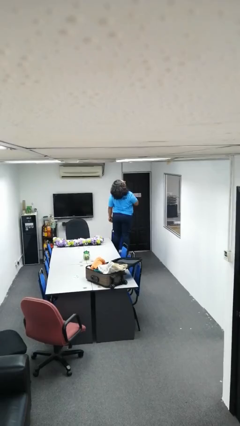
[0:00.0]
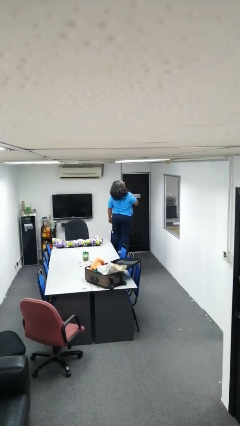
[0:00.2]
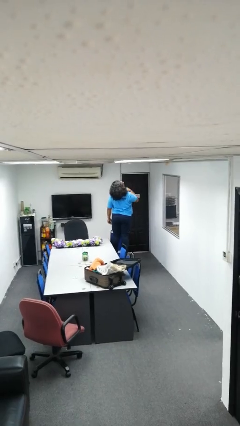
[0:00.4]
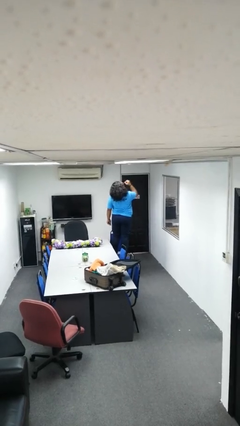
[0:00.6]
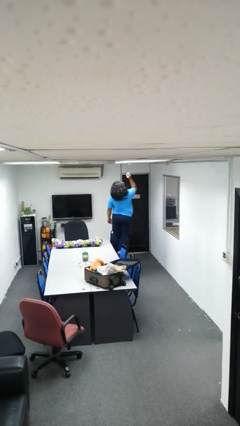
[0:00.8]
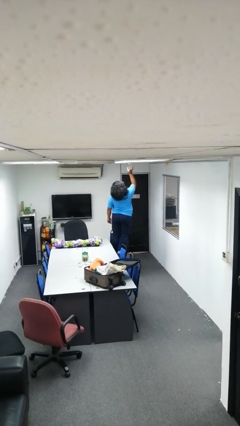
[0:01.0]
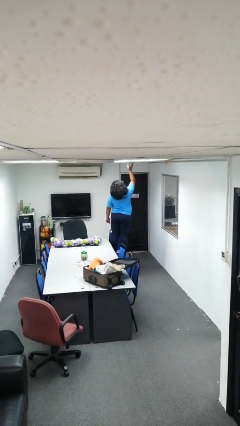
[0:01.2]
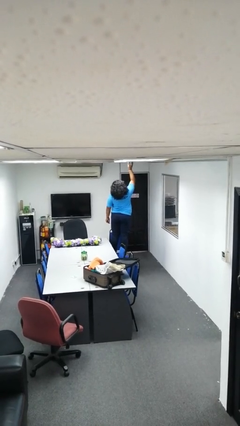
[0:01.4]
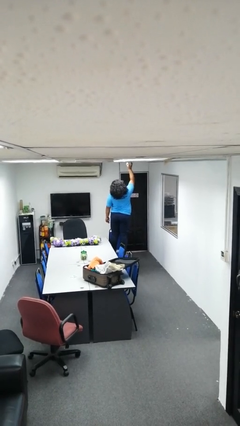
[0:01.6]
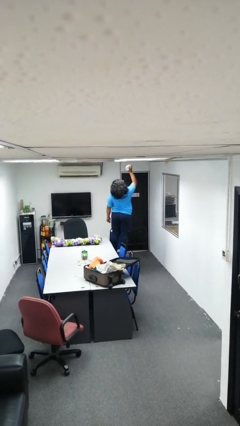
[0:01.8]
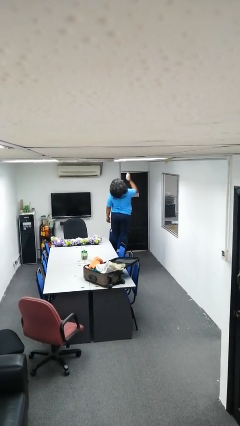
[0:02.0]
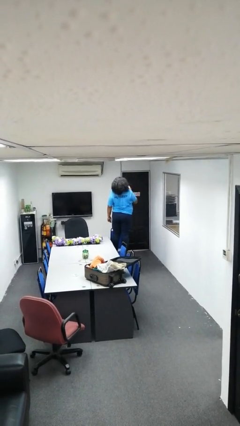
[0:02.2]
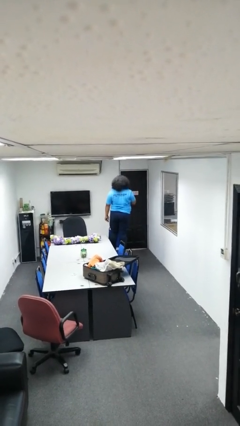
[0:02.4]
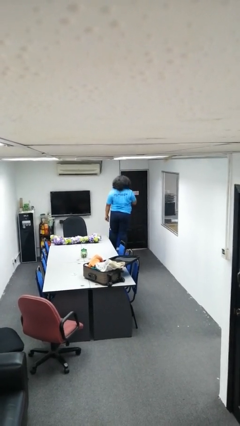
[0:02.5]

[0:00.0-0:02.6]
person takes down smoke detector

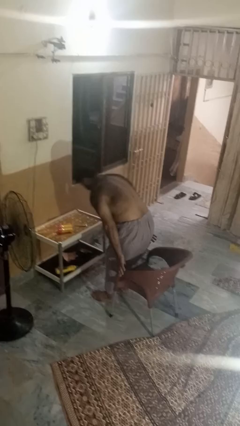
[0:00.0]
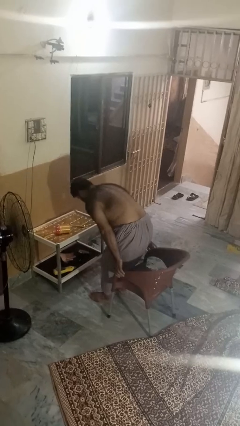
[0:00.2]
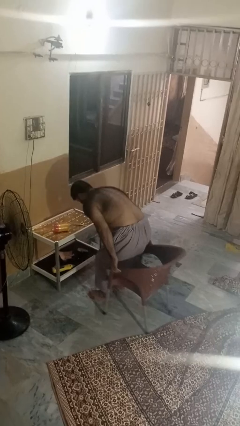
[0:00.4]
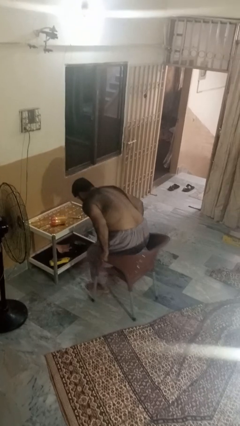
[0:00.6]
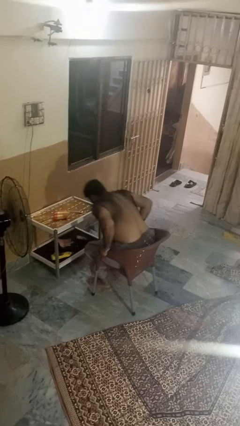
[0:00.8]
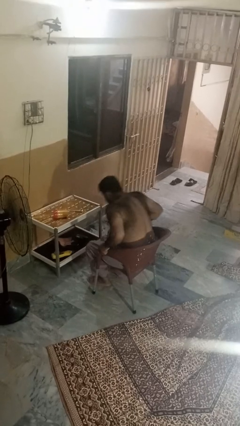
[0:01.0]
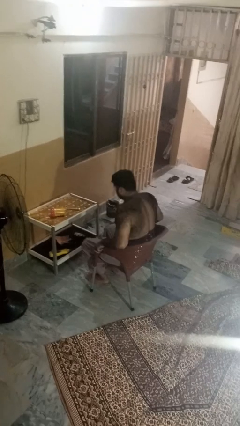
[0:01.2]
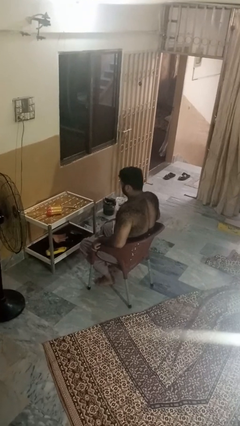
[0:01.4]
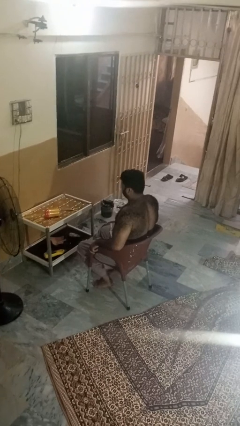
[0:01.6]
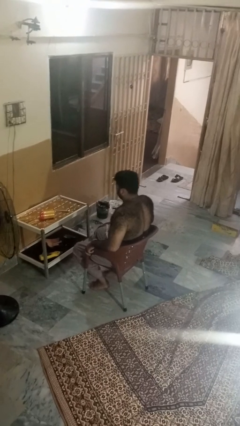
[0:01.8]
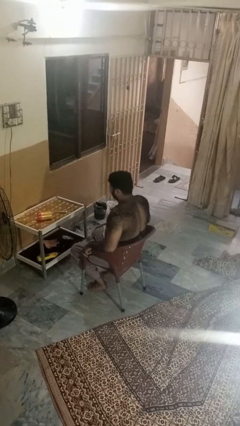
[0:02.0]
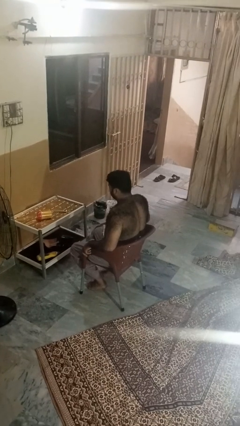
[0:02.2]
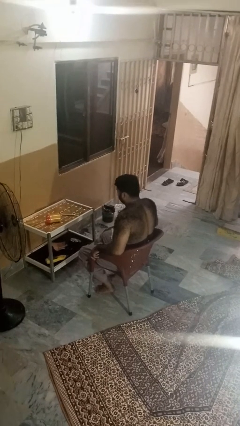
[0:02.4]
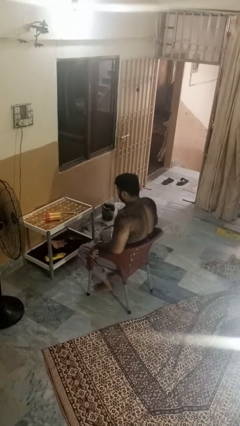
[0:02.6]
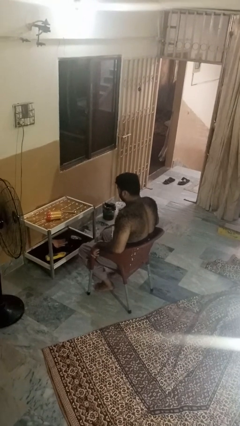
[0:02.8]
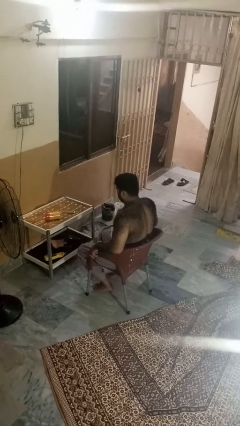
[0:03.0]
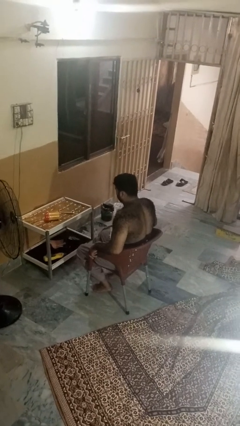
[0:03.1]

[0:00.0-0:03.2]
person sits down

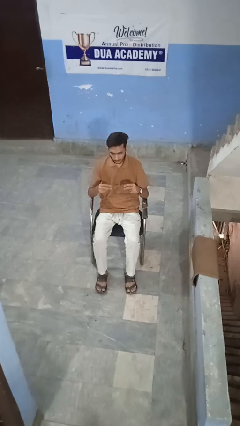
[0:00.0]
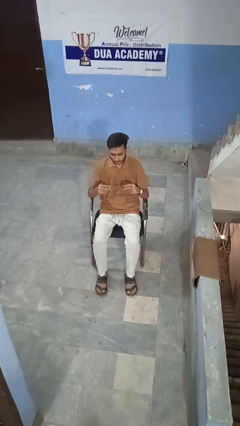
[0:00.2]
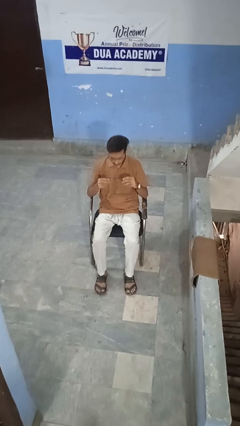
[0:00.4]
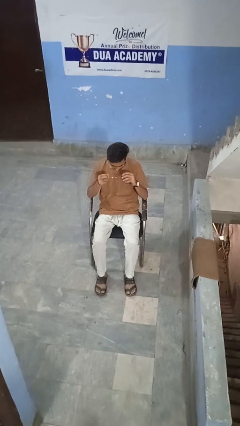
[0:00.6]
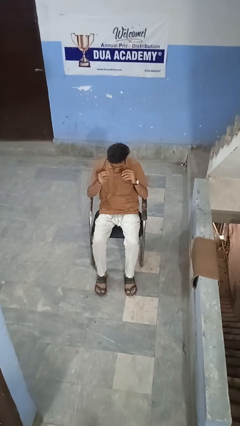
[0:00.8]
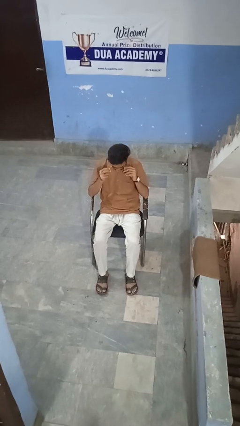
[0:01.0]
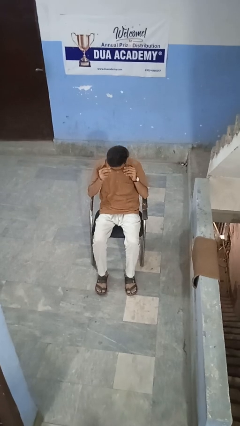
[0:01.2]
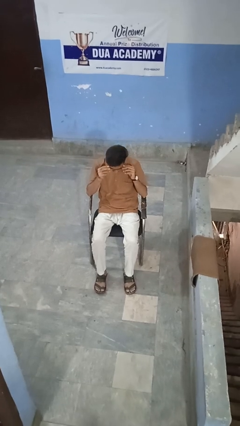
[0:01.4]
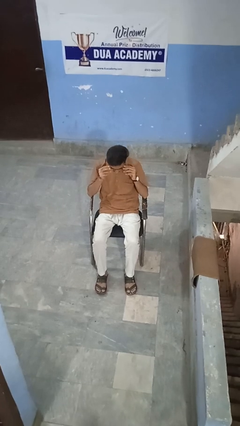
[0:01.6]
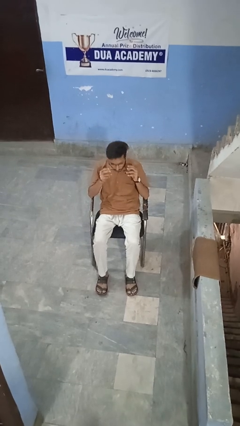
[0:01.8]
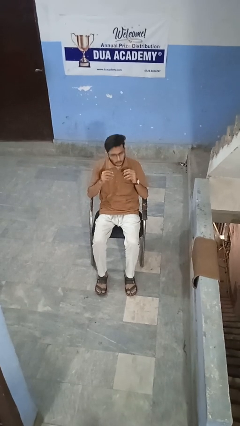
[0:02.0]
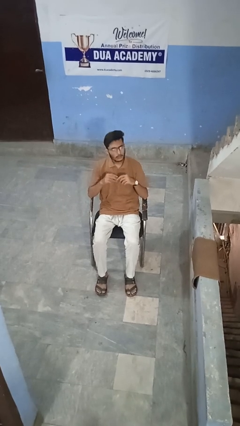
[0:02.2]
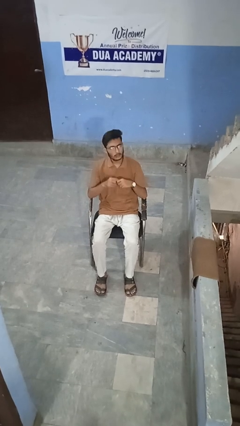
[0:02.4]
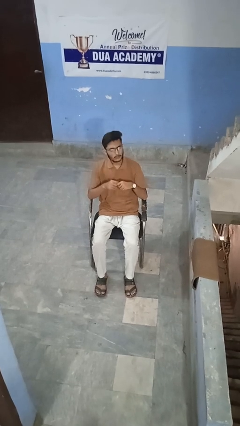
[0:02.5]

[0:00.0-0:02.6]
person puts on glasses

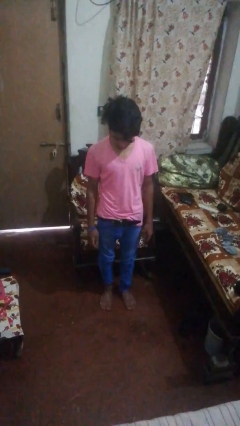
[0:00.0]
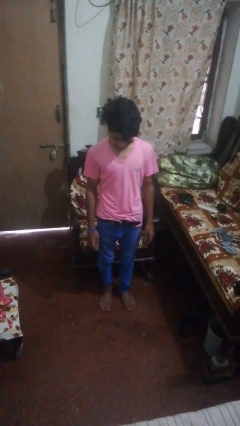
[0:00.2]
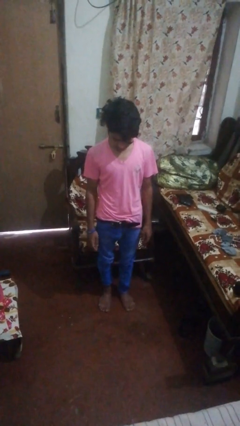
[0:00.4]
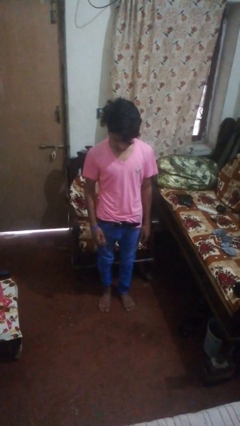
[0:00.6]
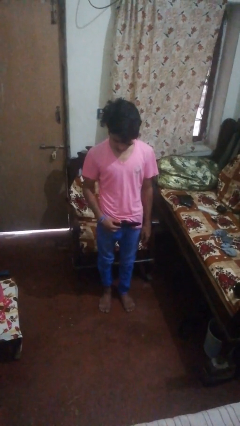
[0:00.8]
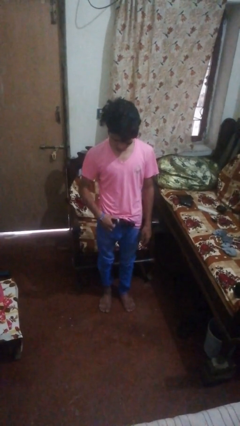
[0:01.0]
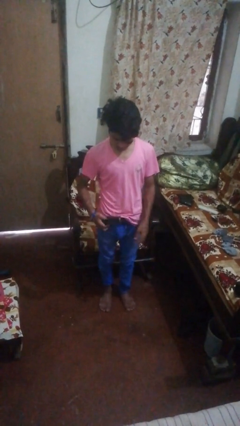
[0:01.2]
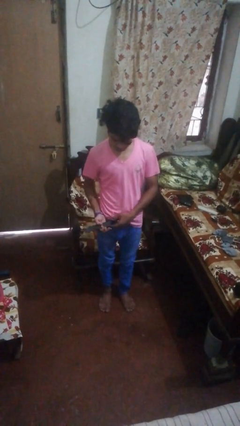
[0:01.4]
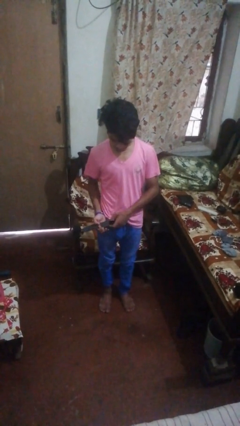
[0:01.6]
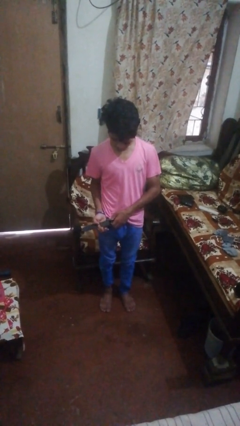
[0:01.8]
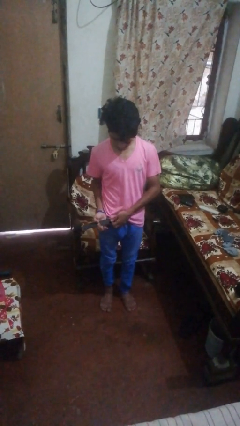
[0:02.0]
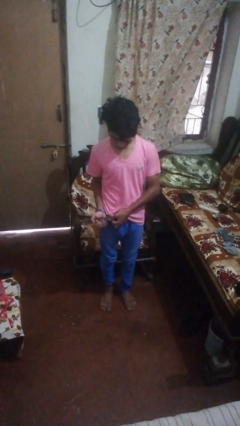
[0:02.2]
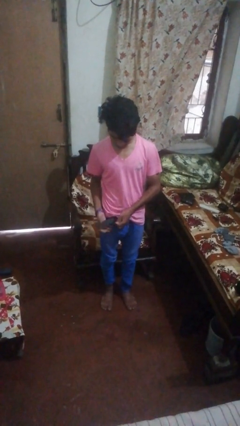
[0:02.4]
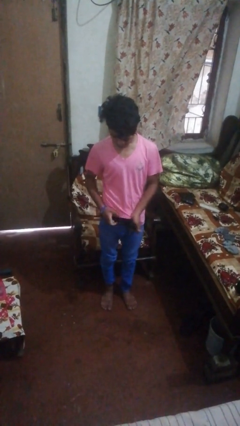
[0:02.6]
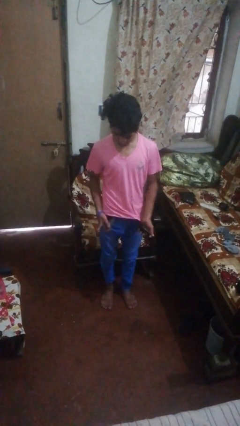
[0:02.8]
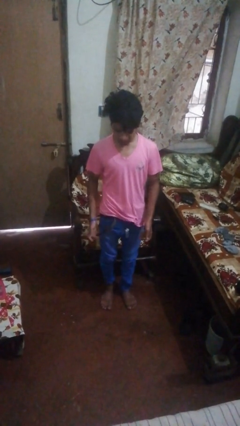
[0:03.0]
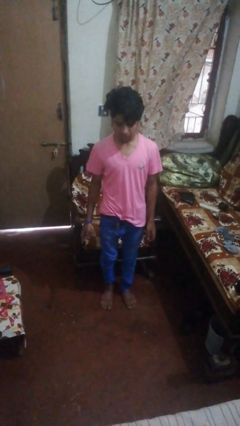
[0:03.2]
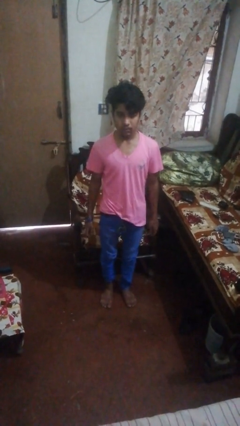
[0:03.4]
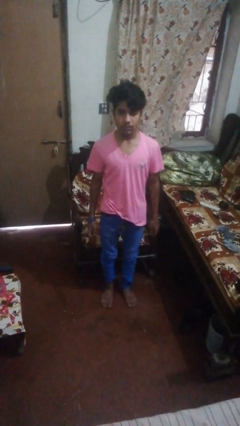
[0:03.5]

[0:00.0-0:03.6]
person takes off belt

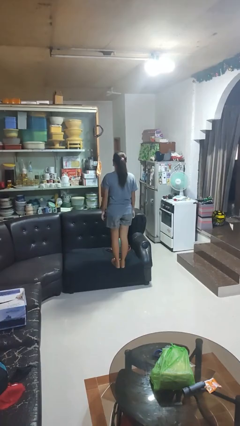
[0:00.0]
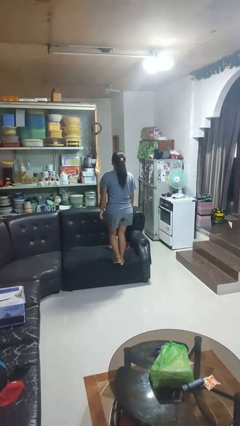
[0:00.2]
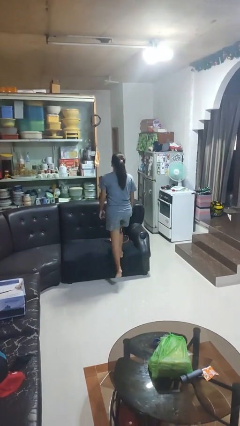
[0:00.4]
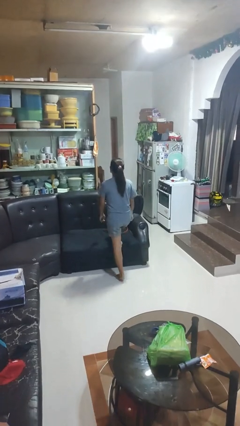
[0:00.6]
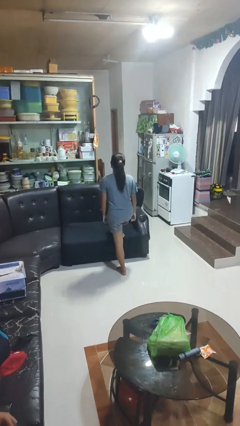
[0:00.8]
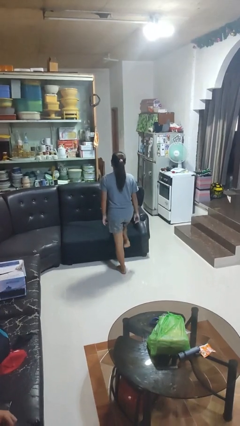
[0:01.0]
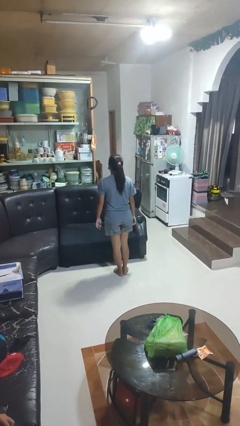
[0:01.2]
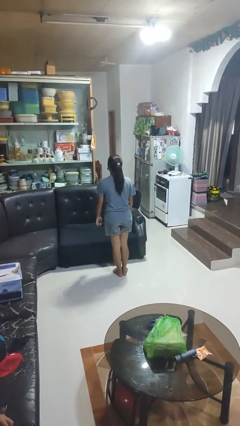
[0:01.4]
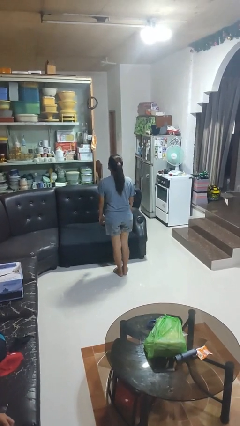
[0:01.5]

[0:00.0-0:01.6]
person climbs off couch

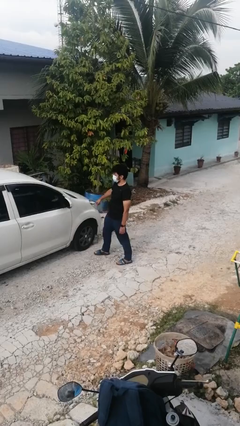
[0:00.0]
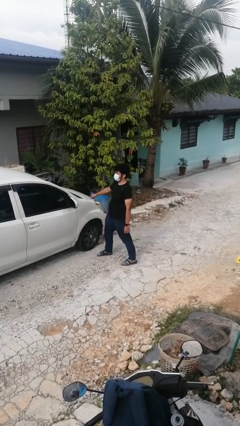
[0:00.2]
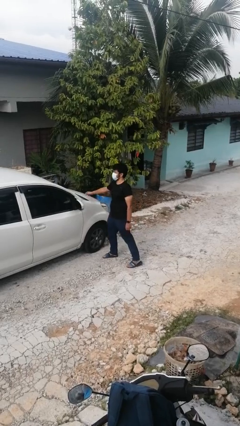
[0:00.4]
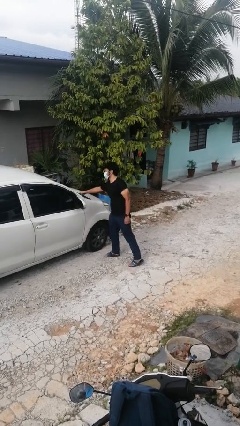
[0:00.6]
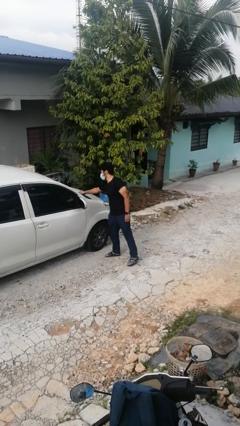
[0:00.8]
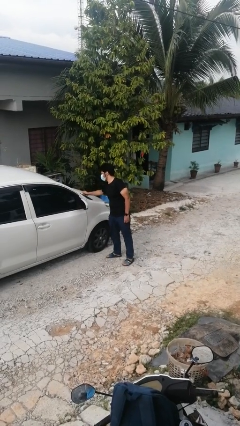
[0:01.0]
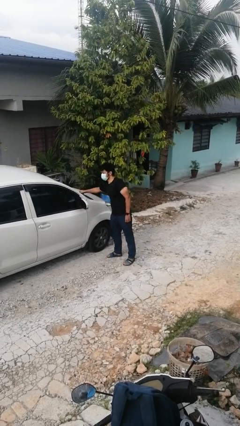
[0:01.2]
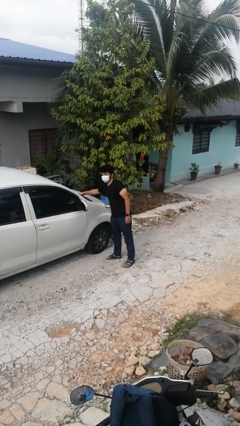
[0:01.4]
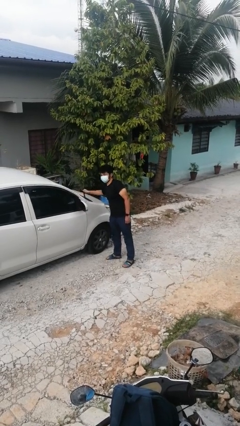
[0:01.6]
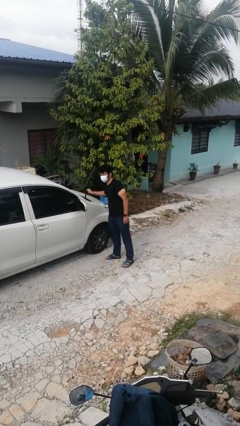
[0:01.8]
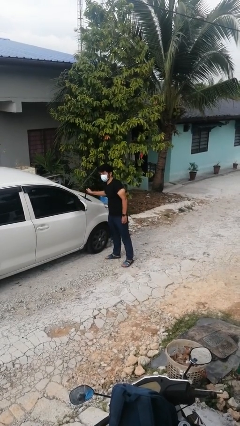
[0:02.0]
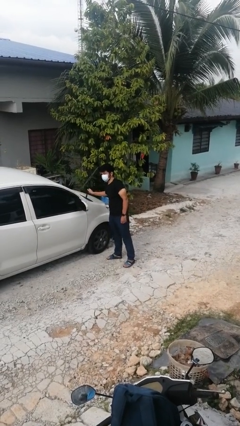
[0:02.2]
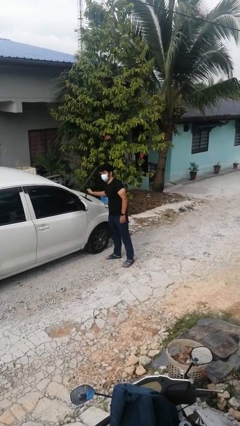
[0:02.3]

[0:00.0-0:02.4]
person flips up car wipers

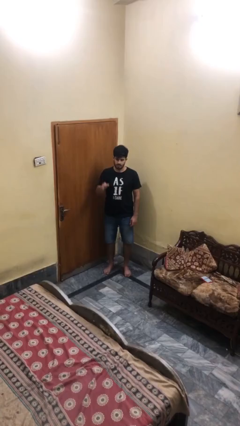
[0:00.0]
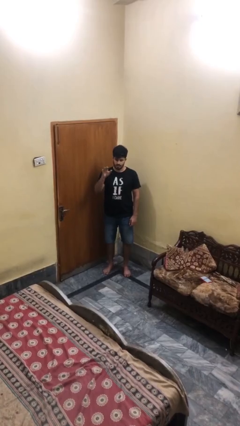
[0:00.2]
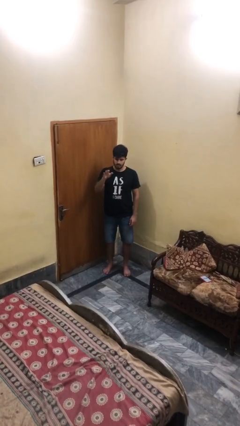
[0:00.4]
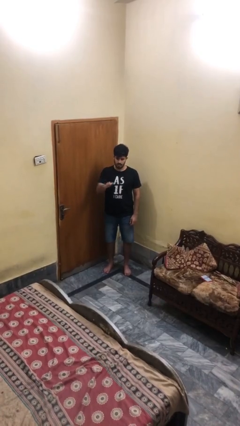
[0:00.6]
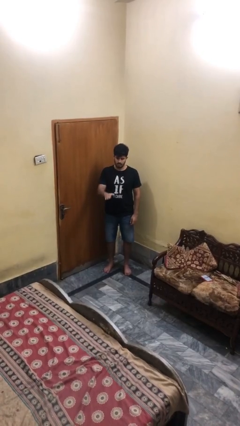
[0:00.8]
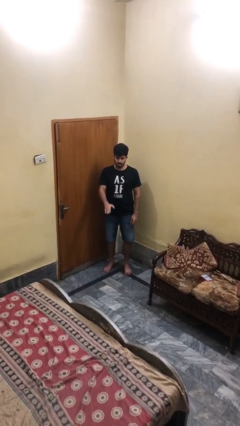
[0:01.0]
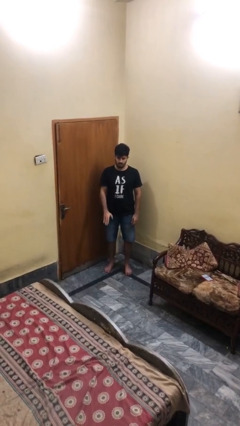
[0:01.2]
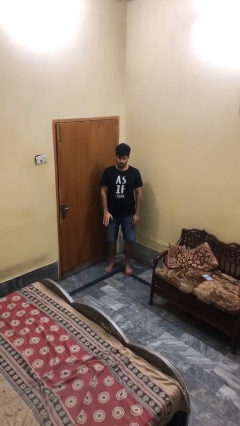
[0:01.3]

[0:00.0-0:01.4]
person gestures swipe down
